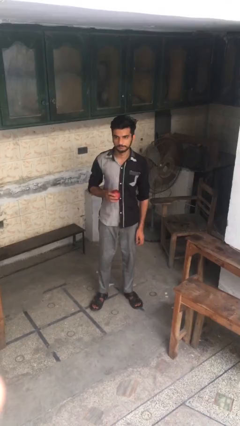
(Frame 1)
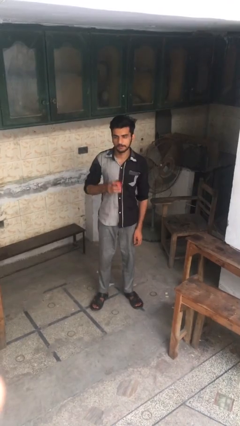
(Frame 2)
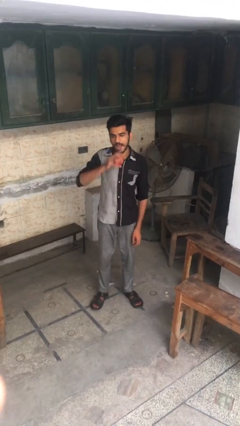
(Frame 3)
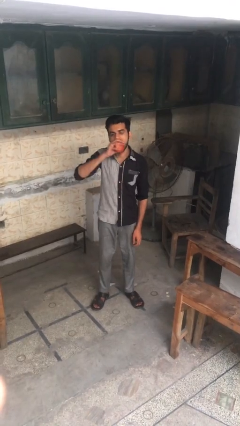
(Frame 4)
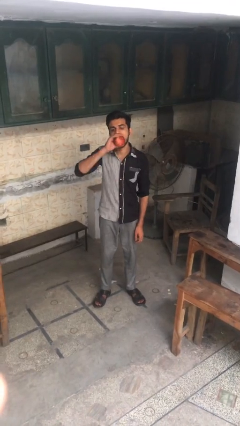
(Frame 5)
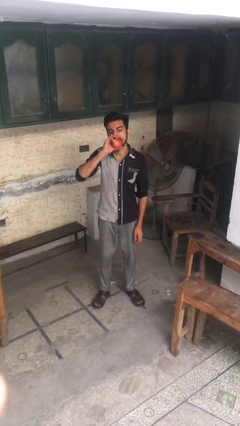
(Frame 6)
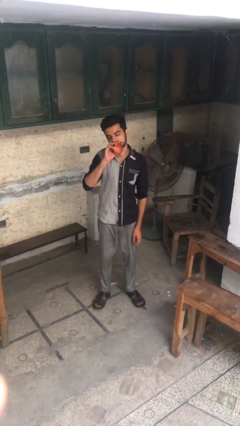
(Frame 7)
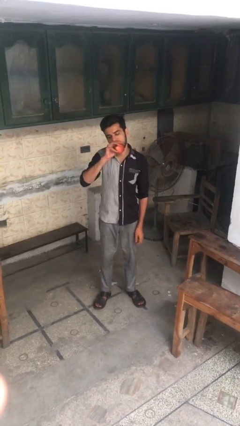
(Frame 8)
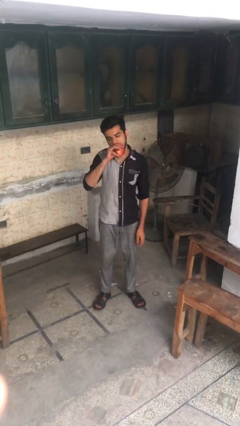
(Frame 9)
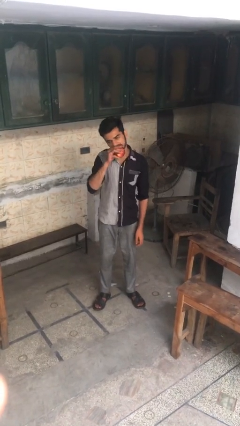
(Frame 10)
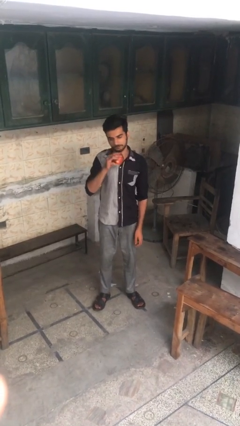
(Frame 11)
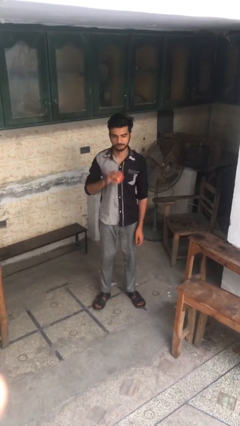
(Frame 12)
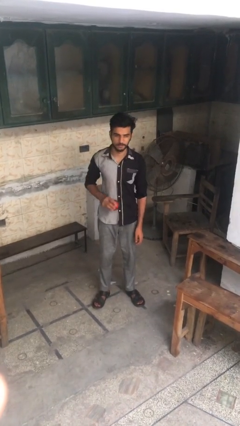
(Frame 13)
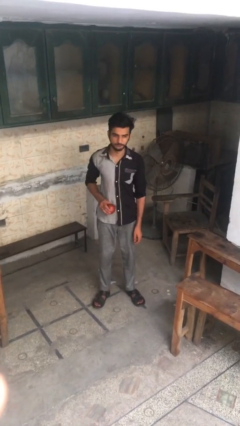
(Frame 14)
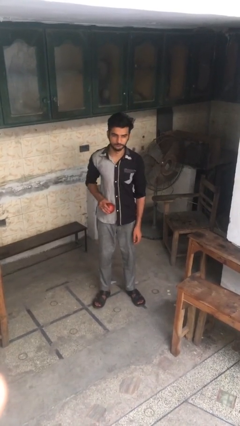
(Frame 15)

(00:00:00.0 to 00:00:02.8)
person eats apple

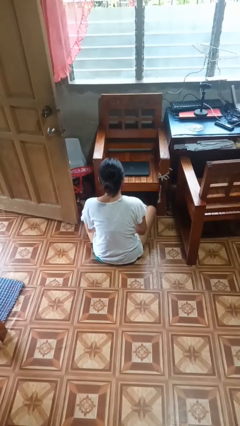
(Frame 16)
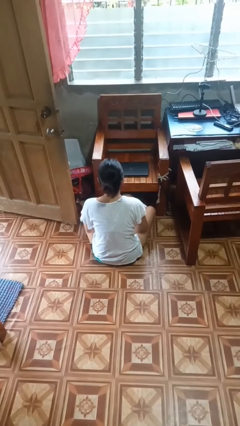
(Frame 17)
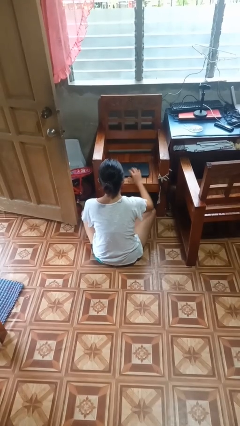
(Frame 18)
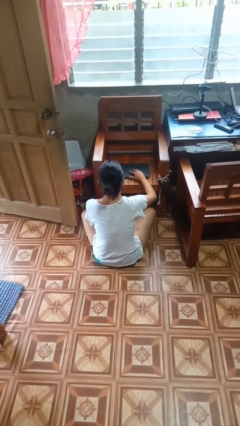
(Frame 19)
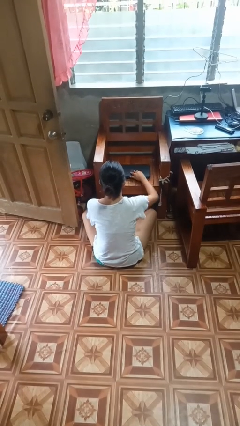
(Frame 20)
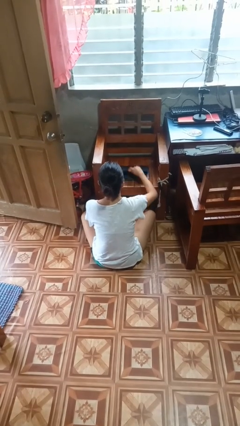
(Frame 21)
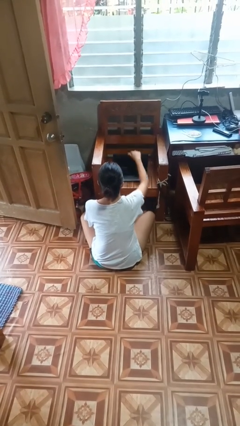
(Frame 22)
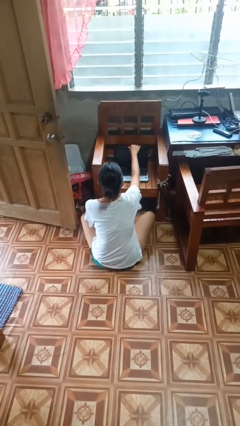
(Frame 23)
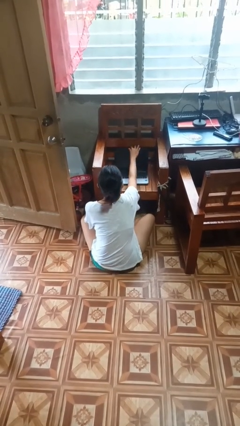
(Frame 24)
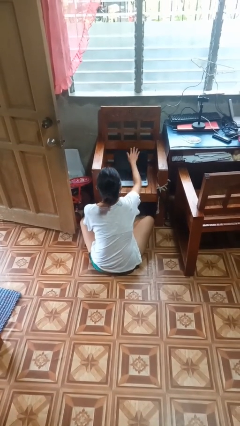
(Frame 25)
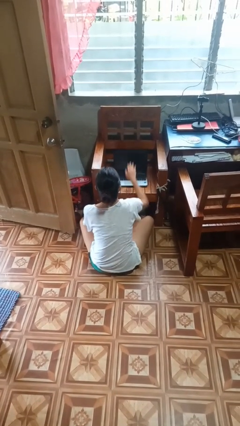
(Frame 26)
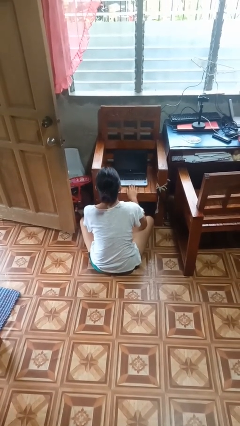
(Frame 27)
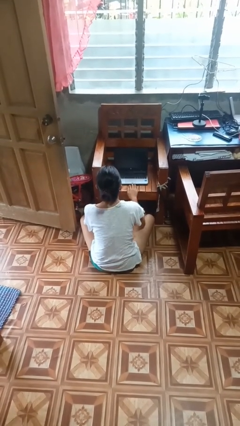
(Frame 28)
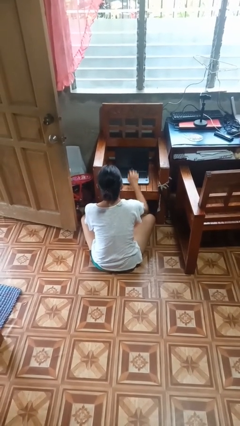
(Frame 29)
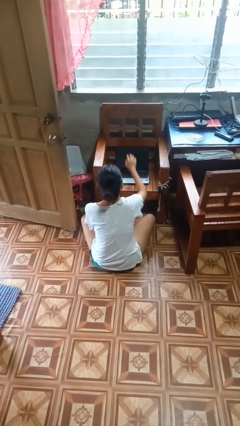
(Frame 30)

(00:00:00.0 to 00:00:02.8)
person opens laptop

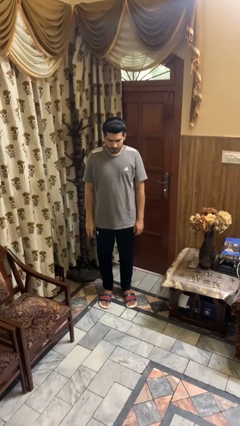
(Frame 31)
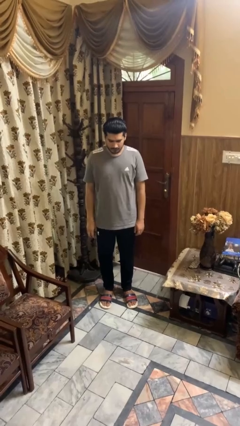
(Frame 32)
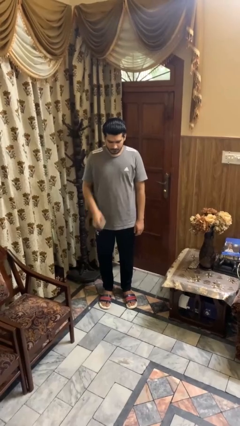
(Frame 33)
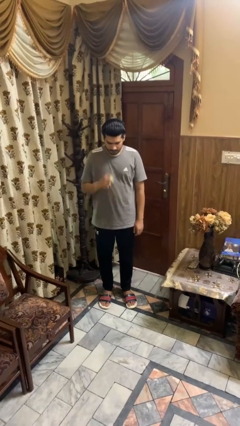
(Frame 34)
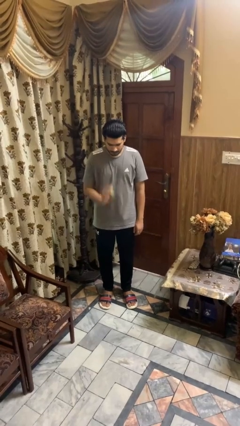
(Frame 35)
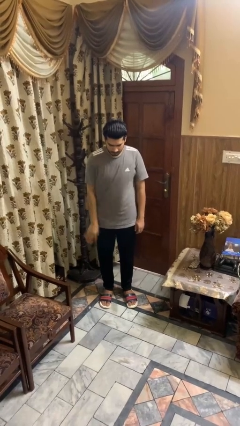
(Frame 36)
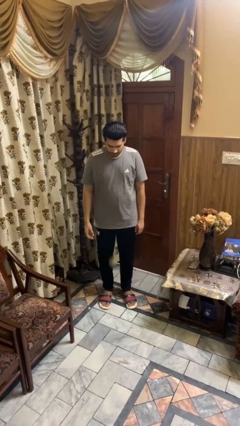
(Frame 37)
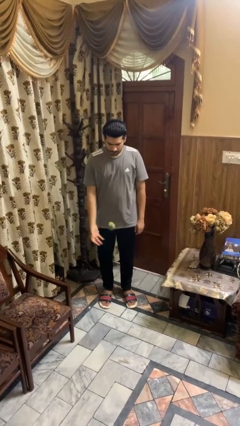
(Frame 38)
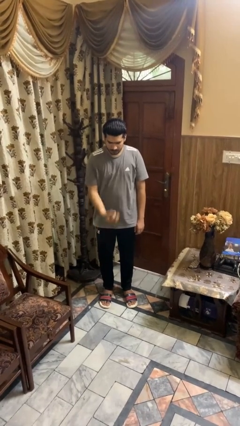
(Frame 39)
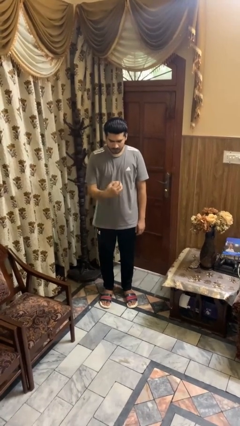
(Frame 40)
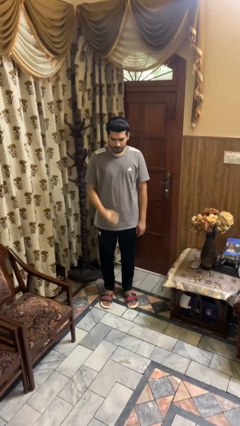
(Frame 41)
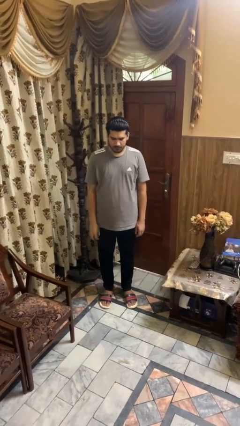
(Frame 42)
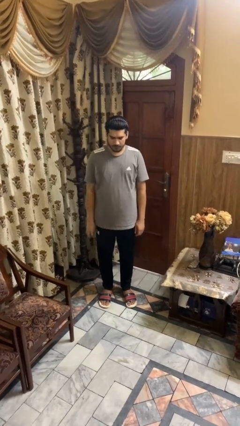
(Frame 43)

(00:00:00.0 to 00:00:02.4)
person bounces ball on floor

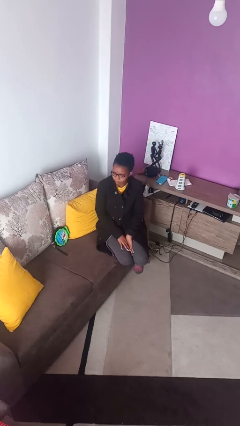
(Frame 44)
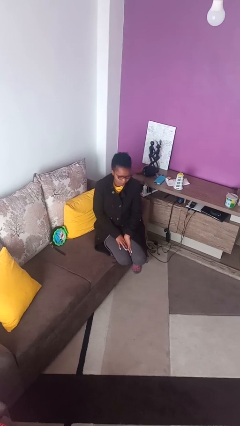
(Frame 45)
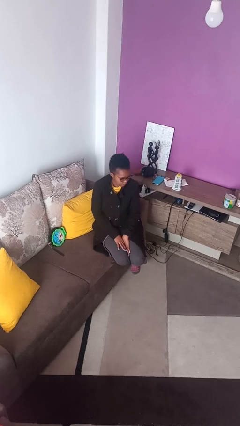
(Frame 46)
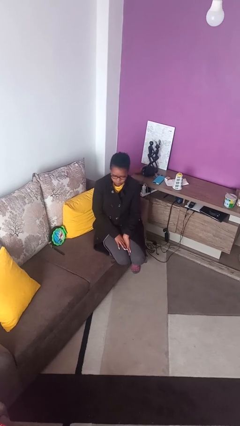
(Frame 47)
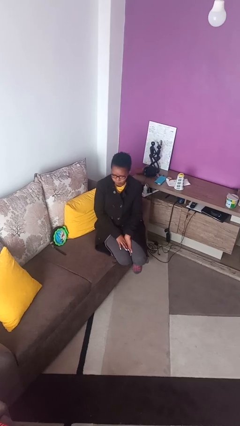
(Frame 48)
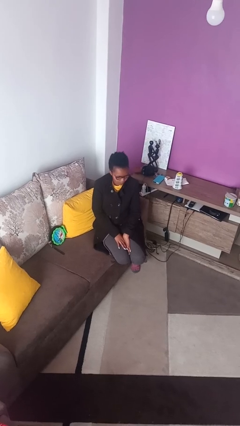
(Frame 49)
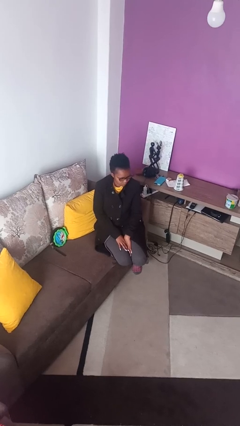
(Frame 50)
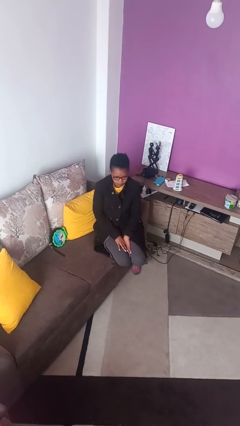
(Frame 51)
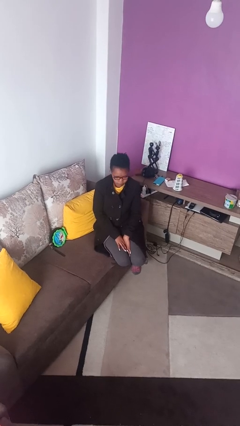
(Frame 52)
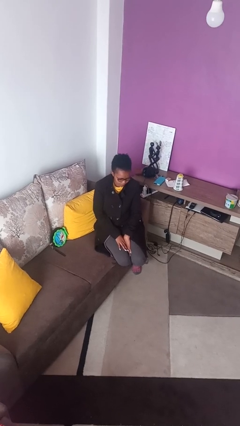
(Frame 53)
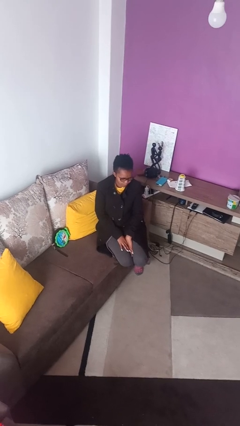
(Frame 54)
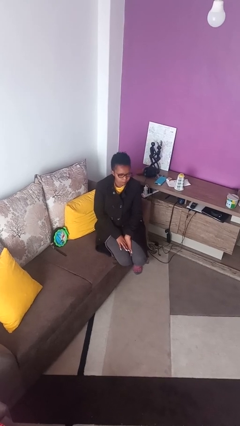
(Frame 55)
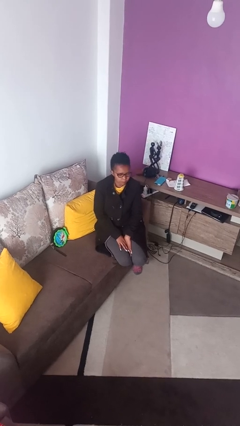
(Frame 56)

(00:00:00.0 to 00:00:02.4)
person shakes head

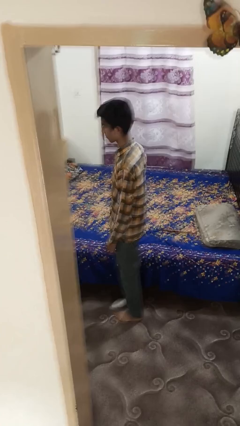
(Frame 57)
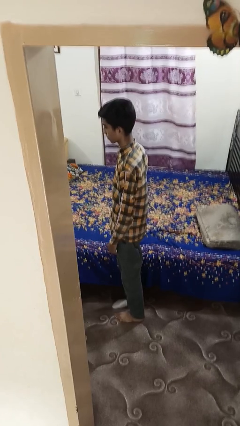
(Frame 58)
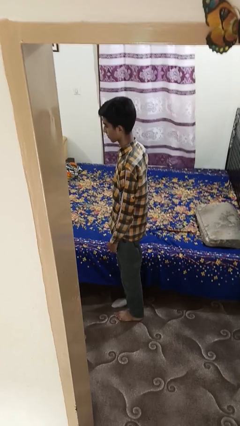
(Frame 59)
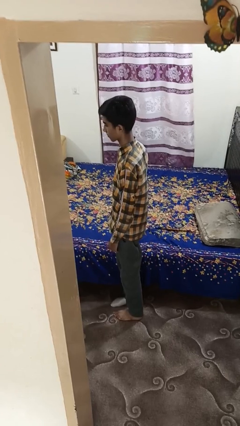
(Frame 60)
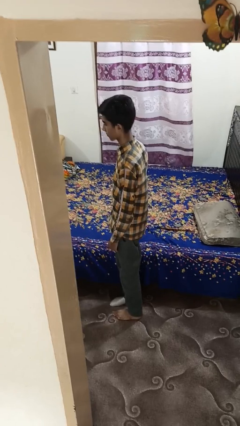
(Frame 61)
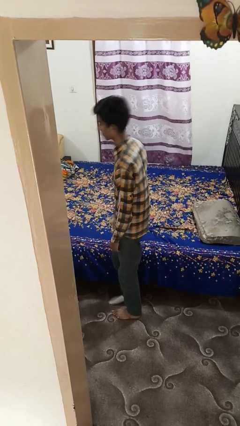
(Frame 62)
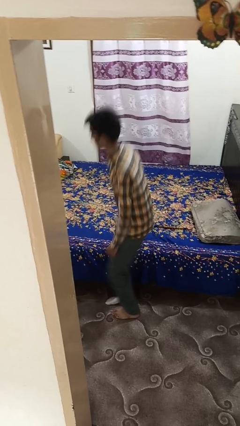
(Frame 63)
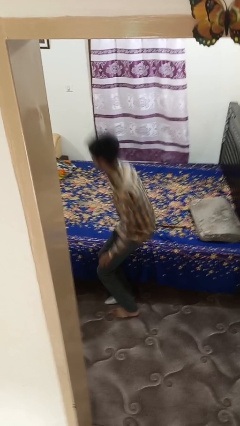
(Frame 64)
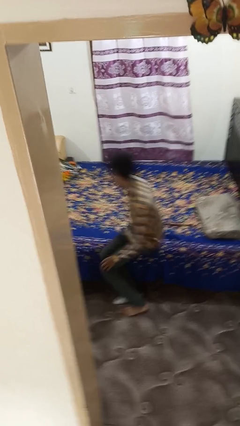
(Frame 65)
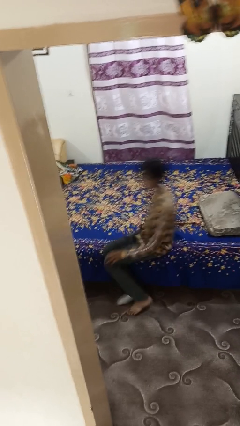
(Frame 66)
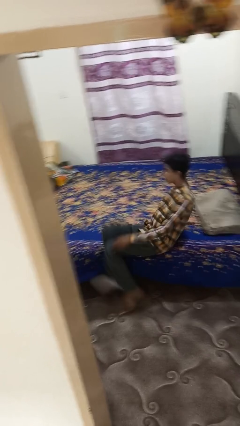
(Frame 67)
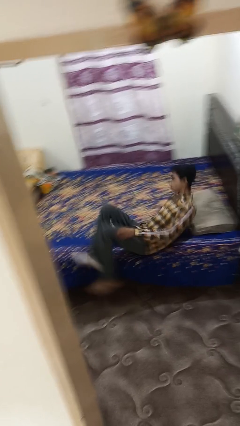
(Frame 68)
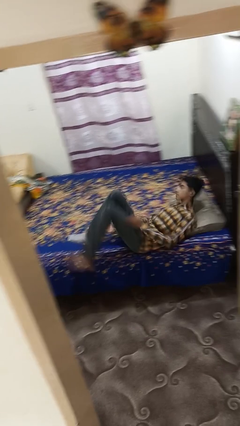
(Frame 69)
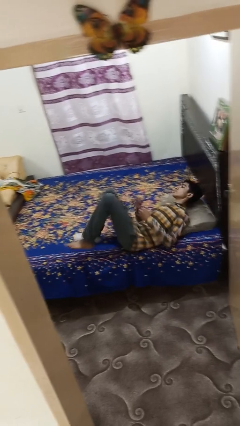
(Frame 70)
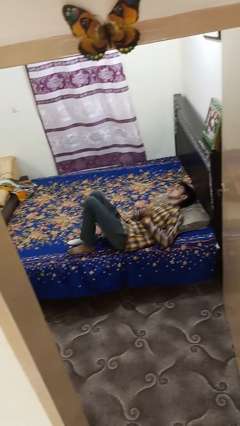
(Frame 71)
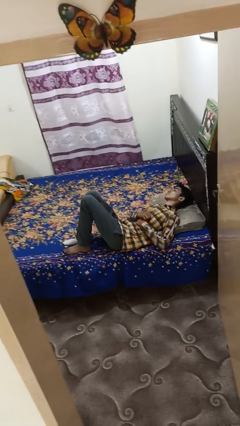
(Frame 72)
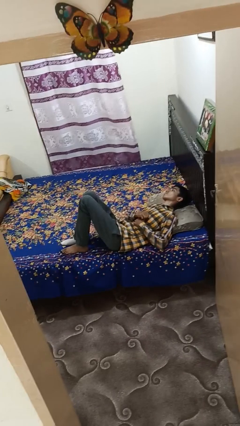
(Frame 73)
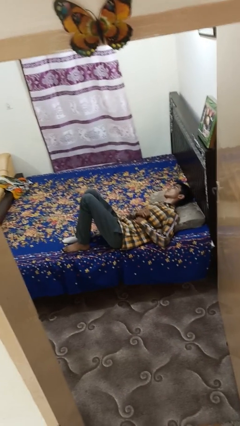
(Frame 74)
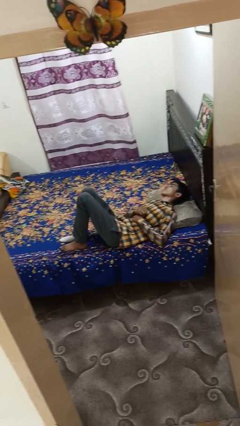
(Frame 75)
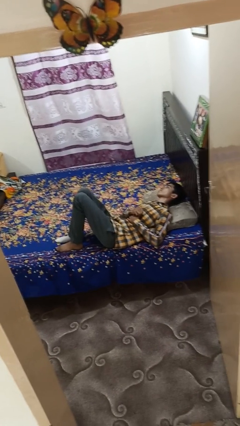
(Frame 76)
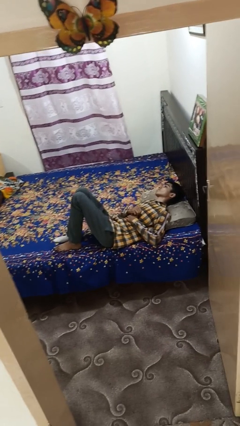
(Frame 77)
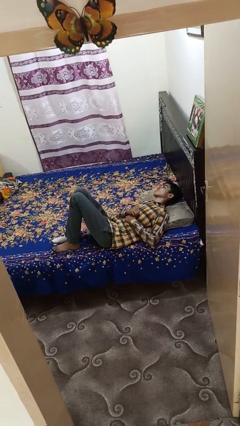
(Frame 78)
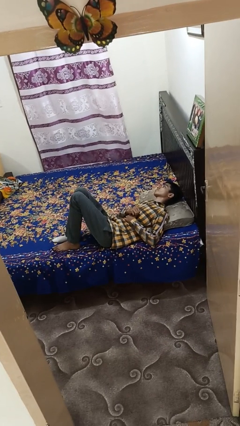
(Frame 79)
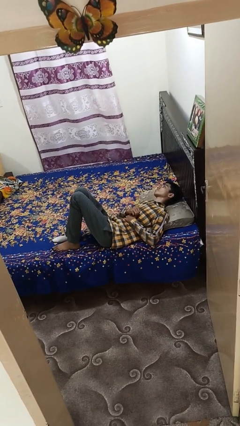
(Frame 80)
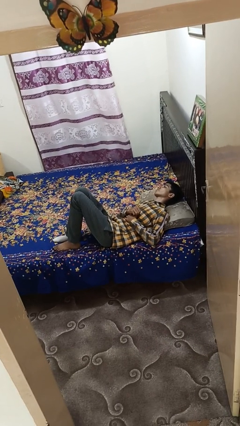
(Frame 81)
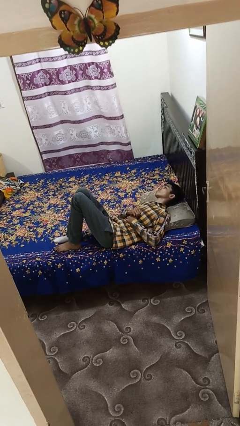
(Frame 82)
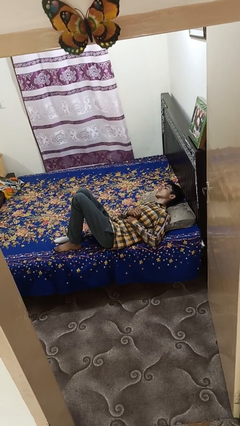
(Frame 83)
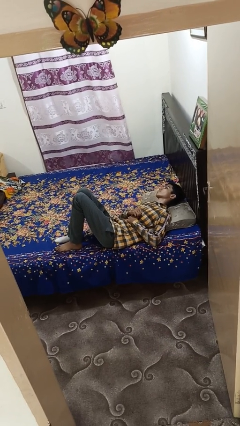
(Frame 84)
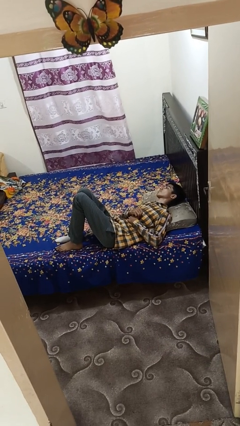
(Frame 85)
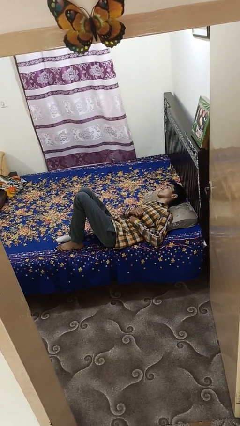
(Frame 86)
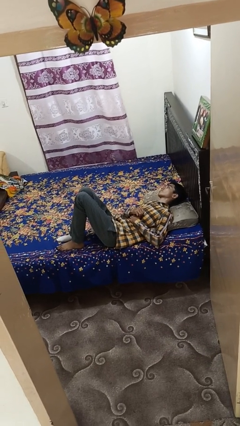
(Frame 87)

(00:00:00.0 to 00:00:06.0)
person lies down on bed

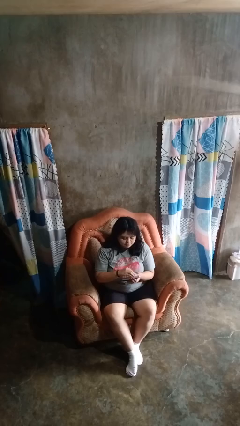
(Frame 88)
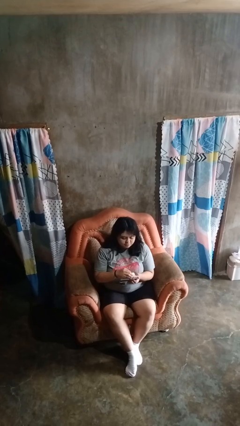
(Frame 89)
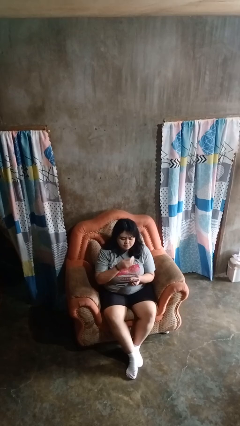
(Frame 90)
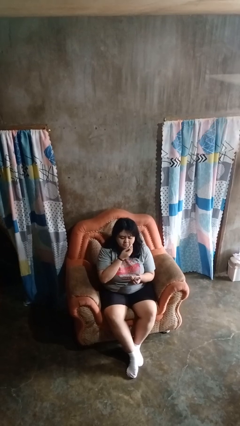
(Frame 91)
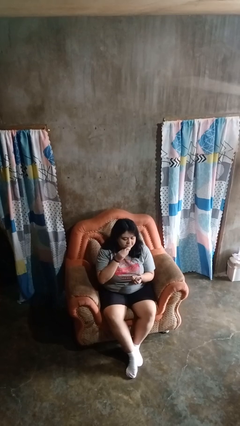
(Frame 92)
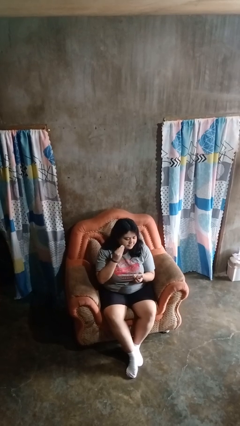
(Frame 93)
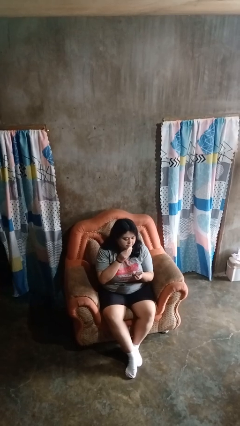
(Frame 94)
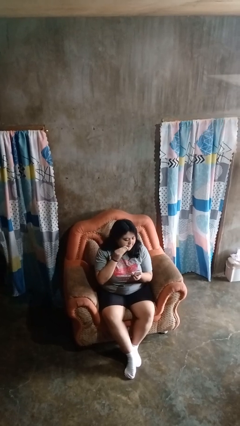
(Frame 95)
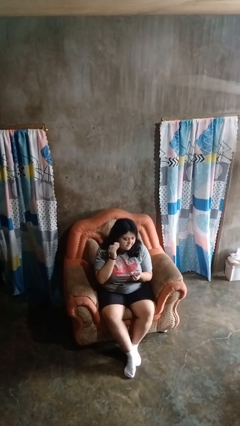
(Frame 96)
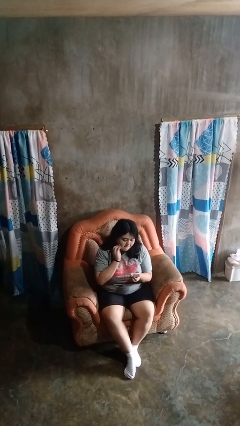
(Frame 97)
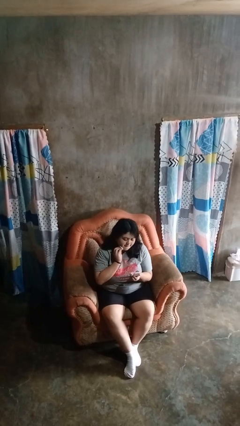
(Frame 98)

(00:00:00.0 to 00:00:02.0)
person applies foundation makeup
